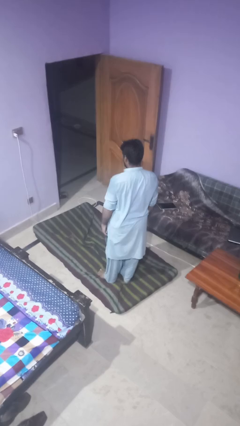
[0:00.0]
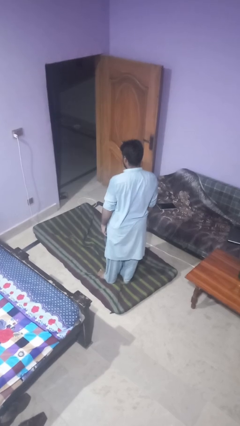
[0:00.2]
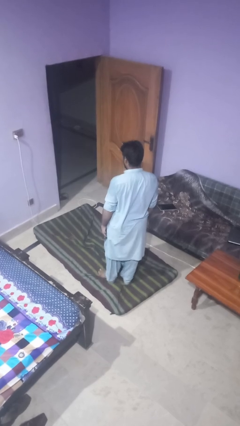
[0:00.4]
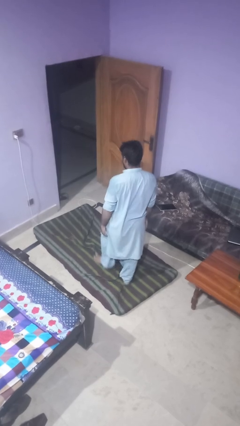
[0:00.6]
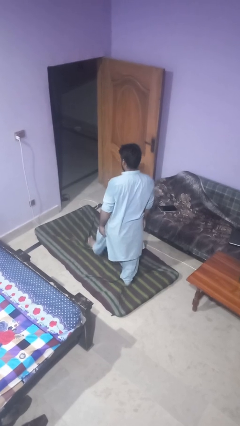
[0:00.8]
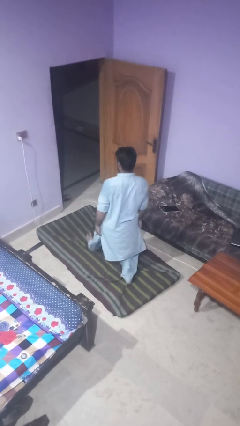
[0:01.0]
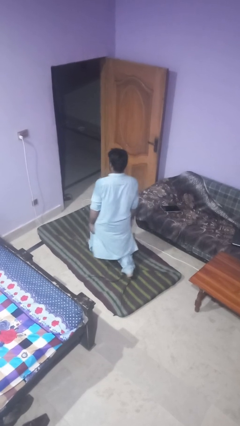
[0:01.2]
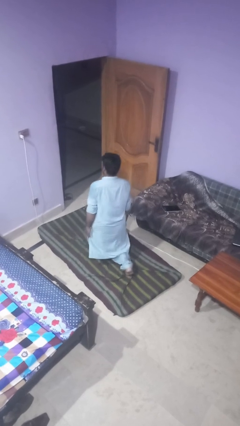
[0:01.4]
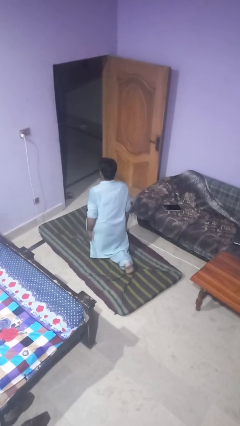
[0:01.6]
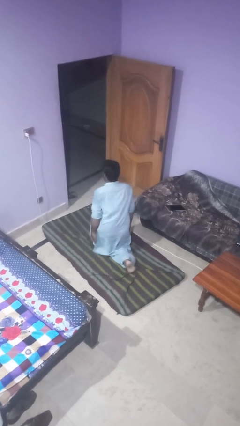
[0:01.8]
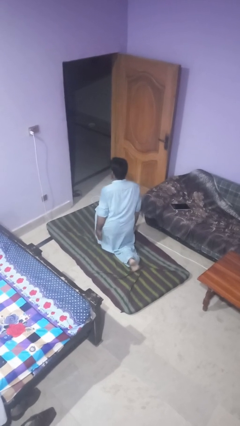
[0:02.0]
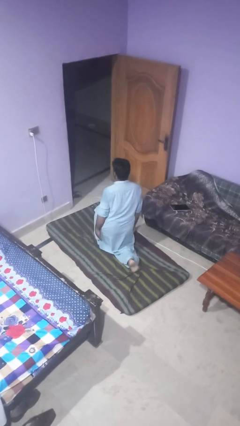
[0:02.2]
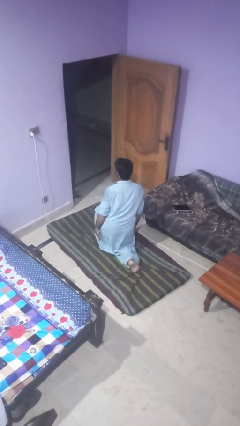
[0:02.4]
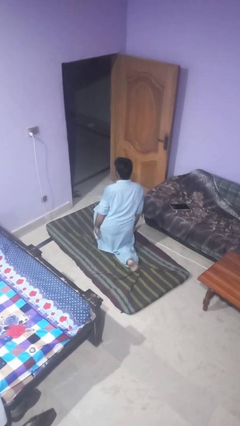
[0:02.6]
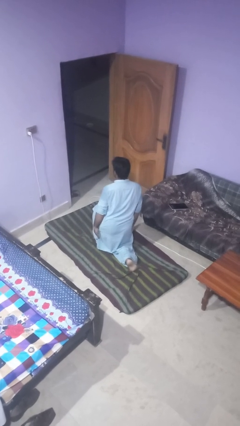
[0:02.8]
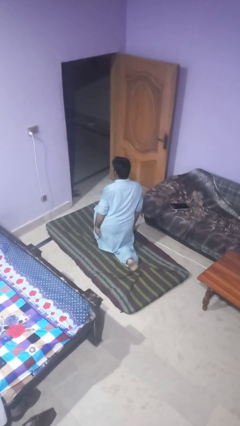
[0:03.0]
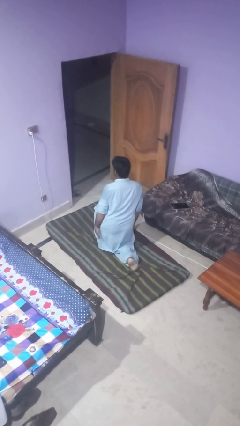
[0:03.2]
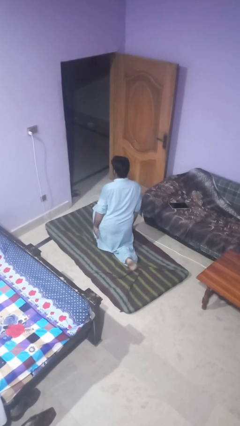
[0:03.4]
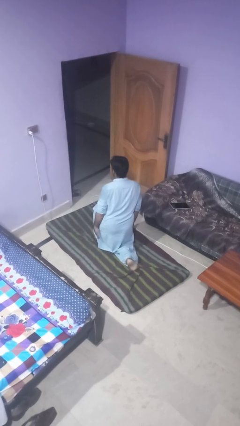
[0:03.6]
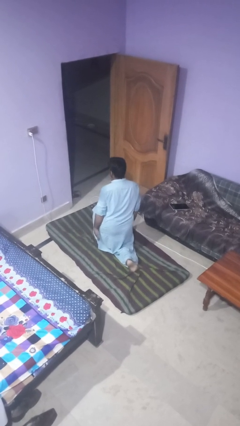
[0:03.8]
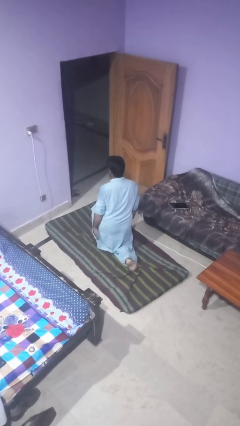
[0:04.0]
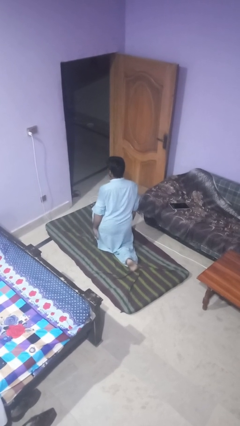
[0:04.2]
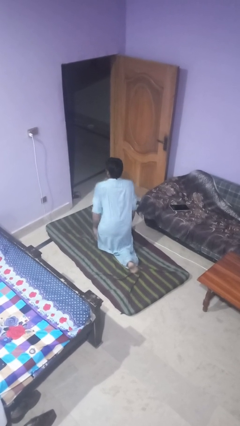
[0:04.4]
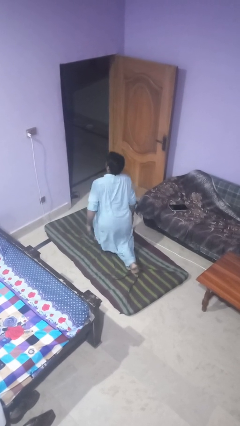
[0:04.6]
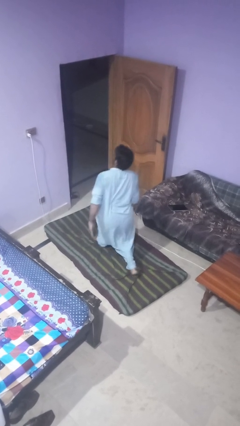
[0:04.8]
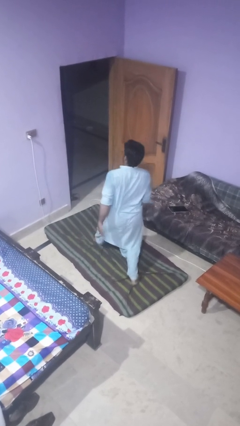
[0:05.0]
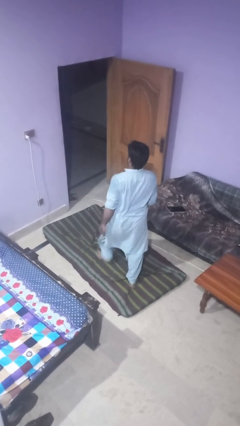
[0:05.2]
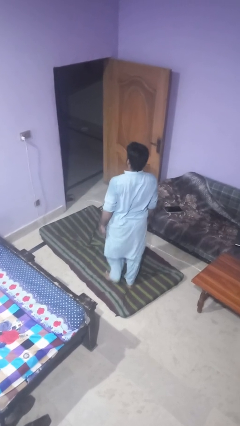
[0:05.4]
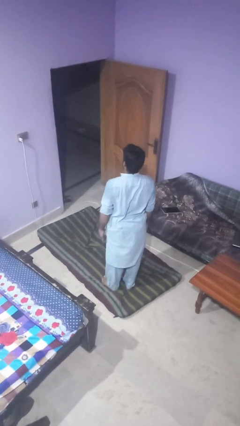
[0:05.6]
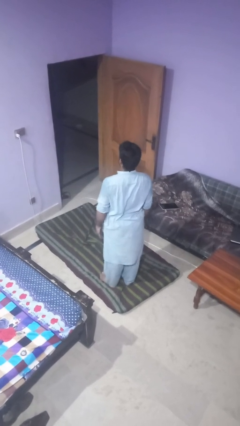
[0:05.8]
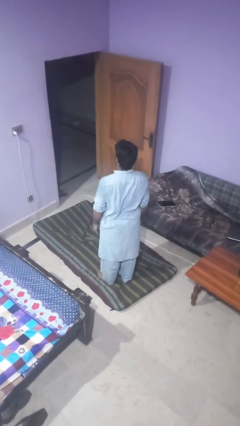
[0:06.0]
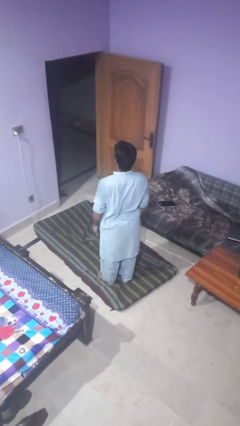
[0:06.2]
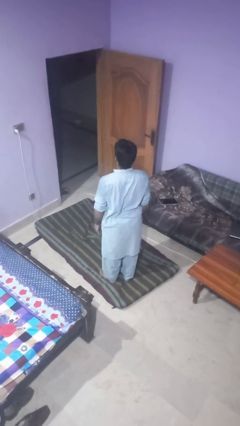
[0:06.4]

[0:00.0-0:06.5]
person exercises with lunges

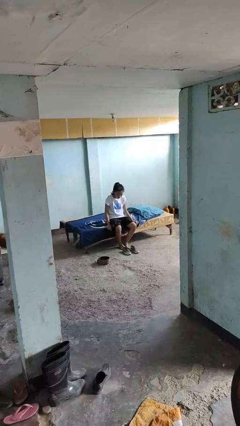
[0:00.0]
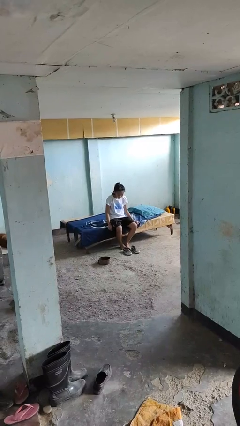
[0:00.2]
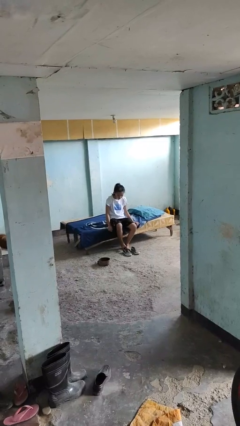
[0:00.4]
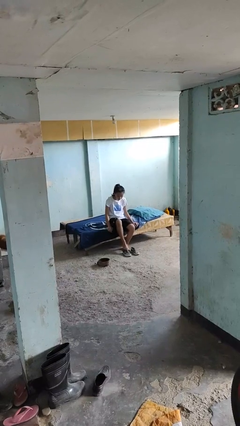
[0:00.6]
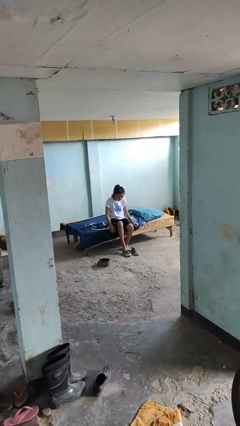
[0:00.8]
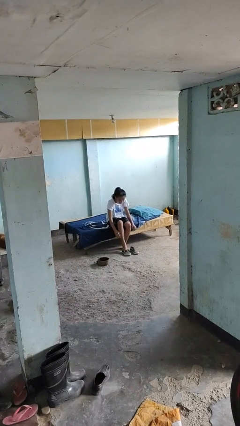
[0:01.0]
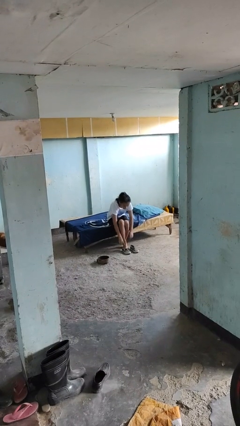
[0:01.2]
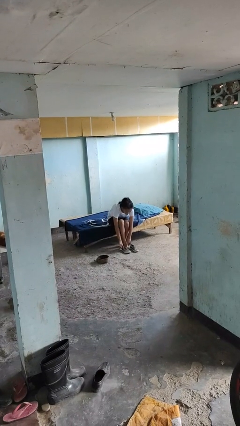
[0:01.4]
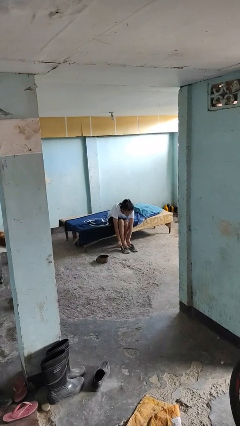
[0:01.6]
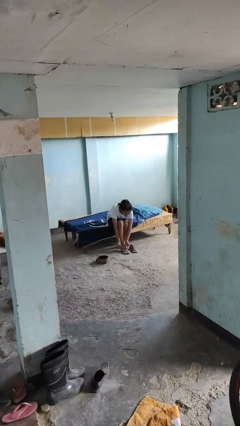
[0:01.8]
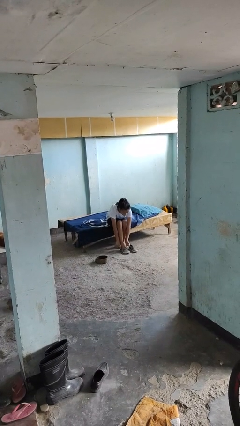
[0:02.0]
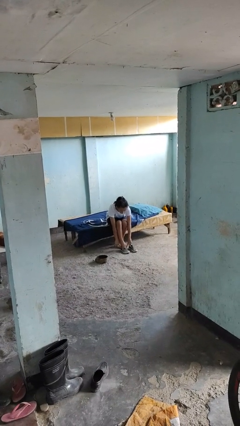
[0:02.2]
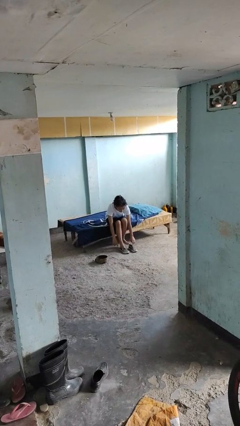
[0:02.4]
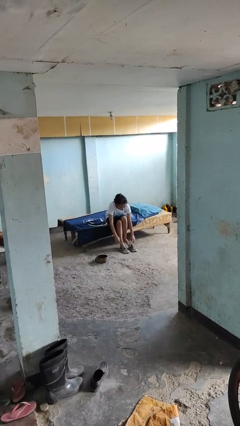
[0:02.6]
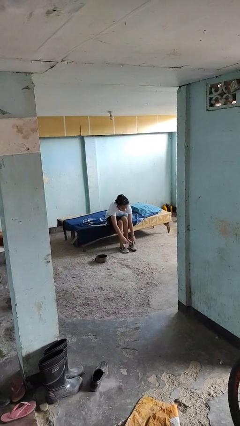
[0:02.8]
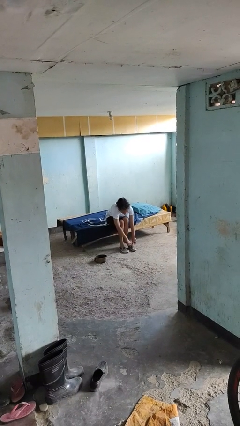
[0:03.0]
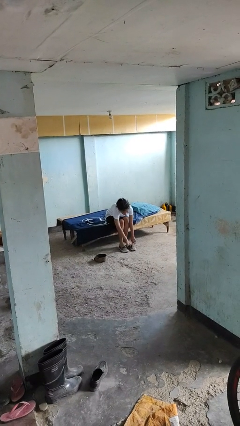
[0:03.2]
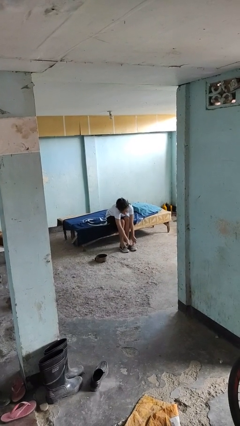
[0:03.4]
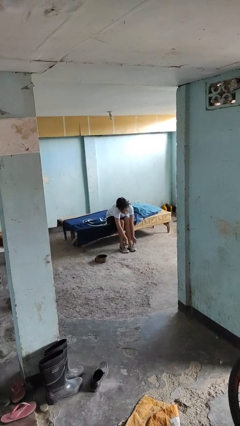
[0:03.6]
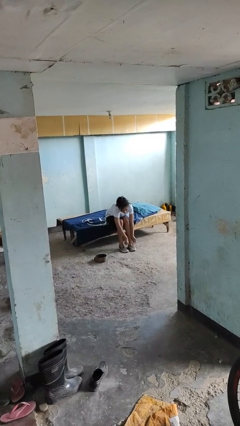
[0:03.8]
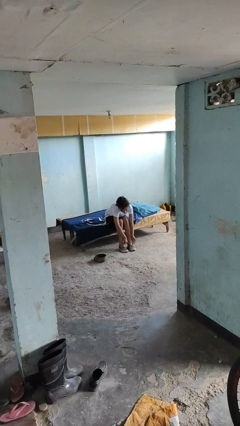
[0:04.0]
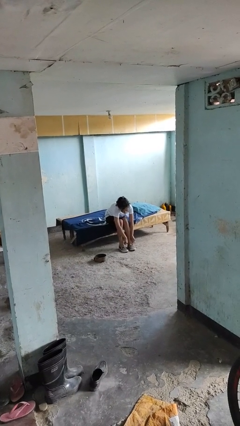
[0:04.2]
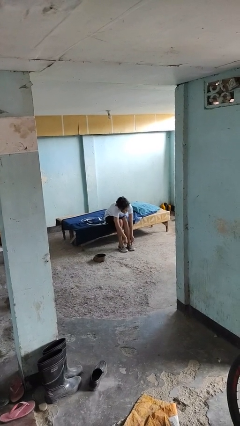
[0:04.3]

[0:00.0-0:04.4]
person puts on shoes

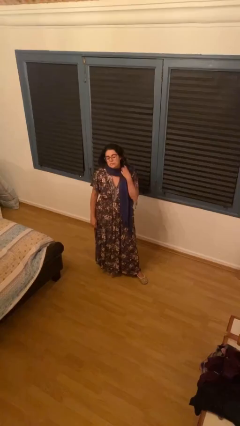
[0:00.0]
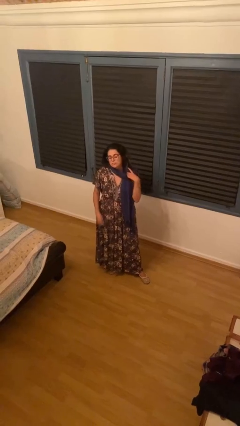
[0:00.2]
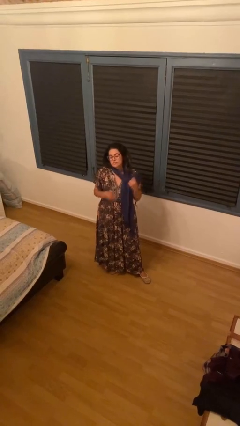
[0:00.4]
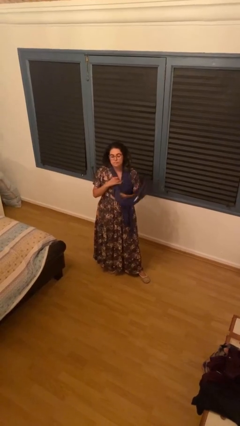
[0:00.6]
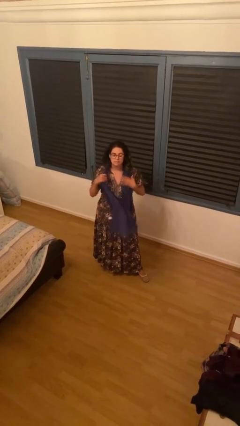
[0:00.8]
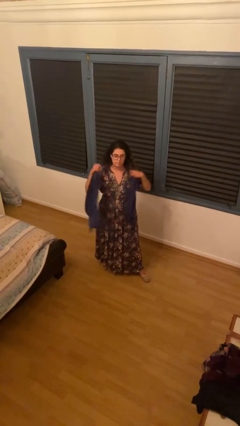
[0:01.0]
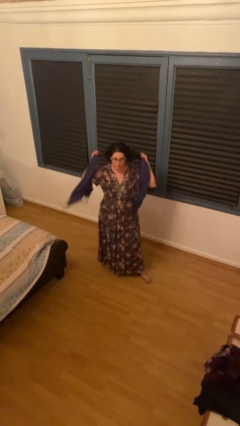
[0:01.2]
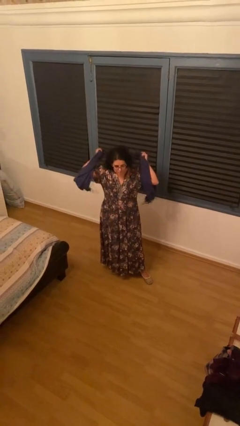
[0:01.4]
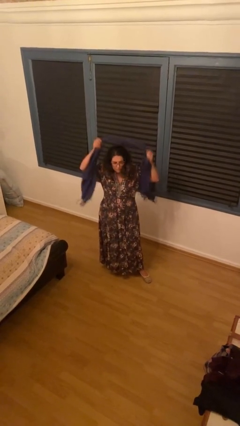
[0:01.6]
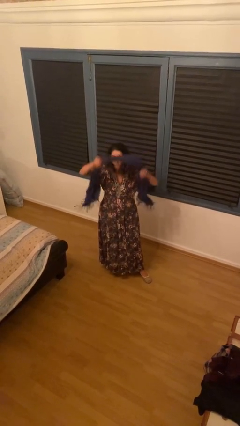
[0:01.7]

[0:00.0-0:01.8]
person takes off scarf

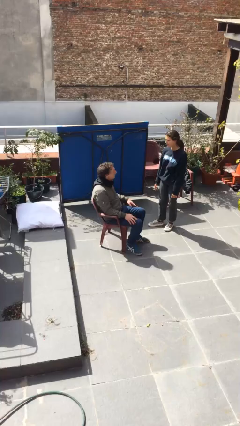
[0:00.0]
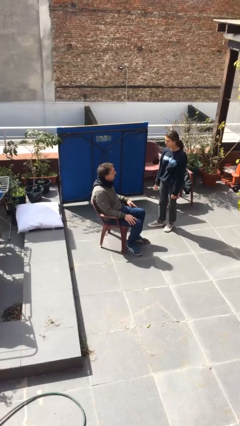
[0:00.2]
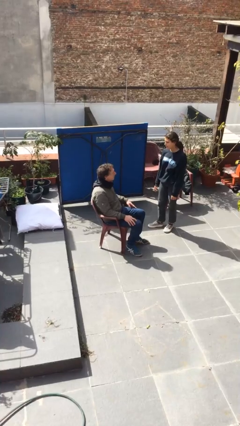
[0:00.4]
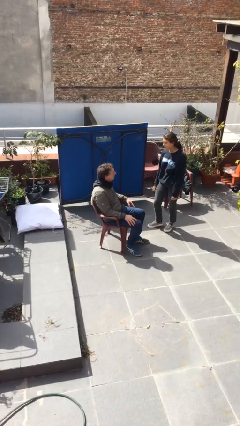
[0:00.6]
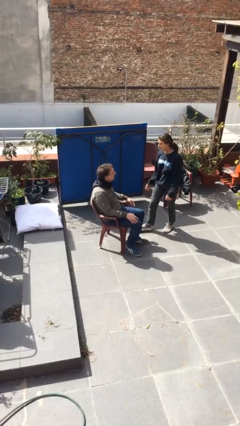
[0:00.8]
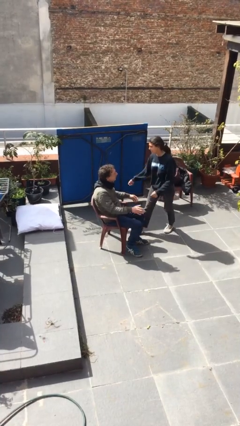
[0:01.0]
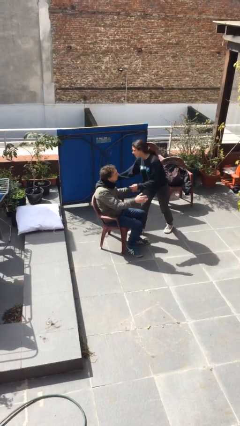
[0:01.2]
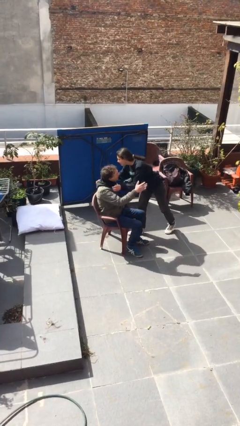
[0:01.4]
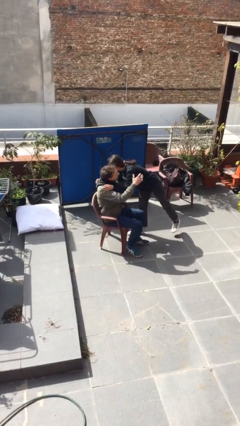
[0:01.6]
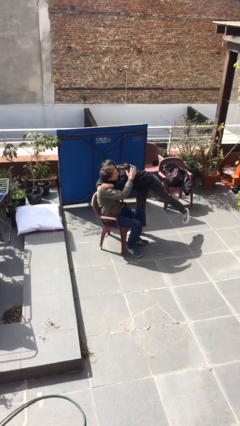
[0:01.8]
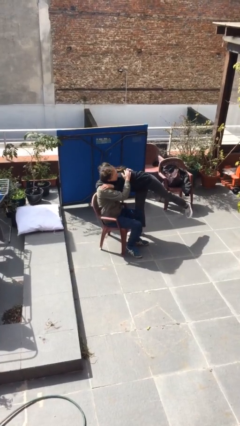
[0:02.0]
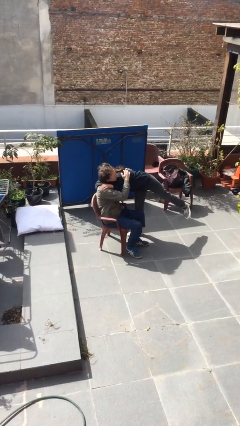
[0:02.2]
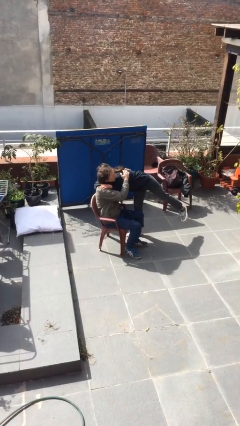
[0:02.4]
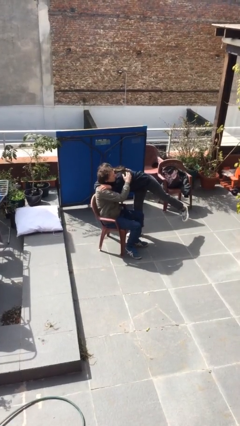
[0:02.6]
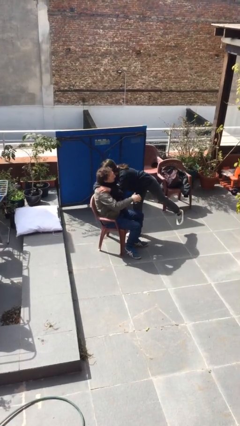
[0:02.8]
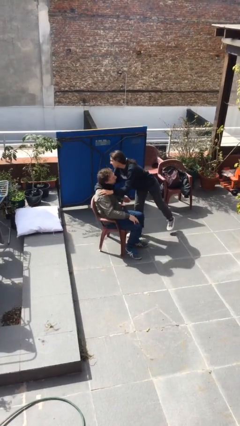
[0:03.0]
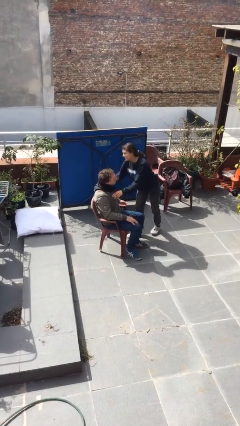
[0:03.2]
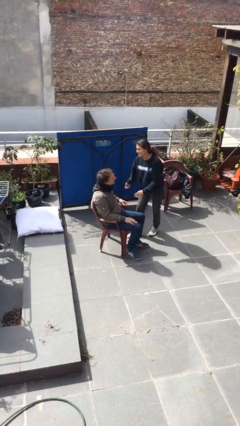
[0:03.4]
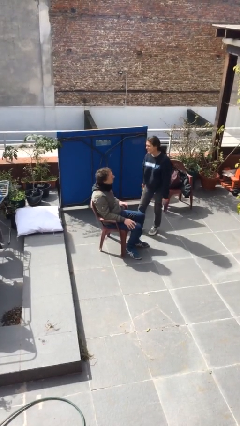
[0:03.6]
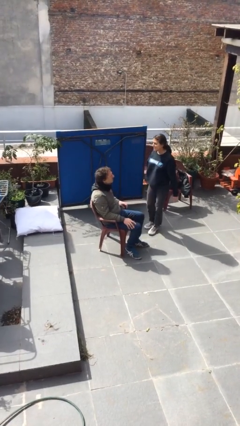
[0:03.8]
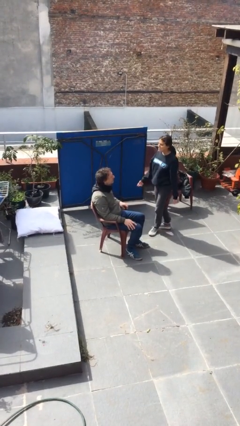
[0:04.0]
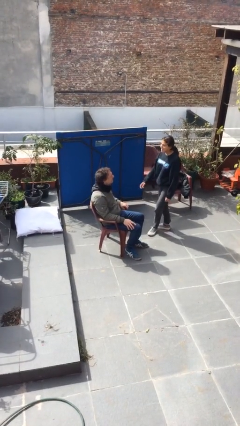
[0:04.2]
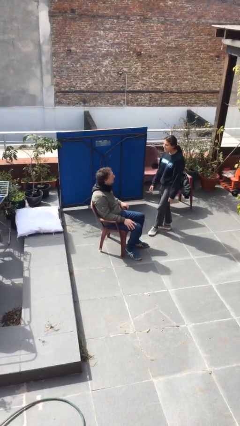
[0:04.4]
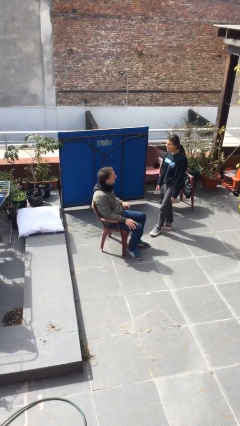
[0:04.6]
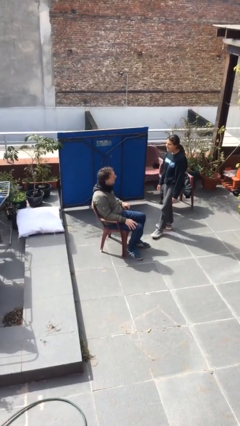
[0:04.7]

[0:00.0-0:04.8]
person embraces person
